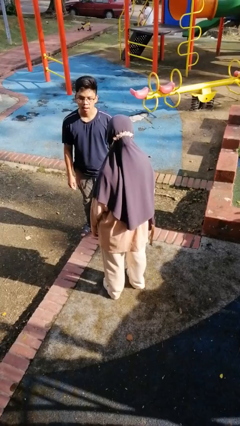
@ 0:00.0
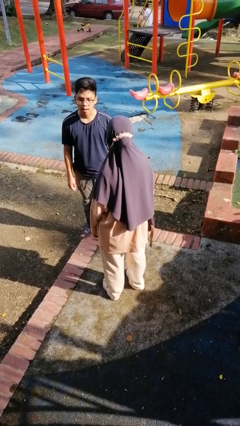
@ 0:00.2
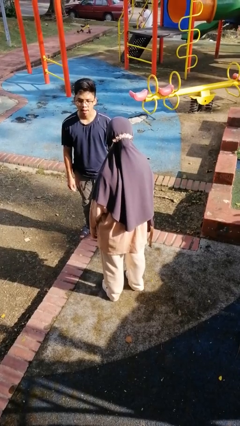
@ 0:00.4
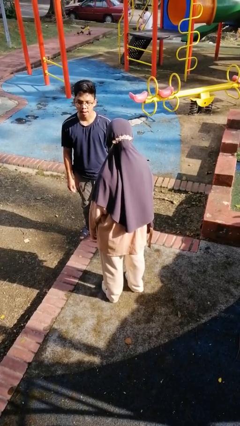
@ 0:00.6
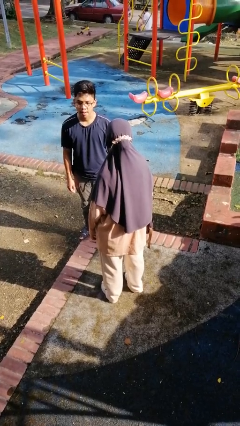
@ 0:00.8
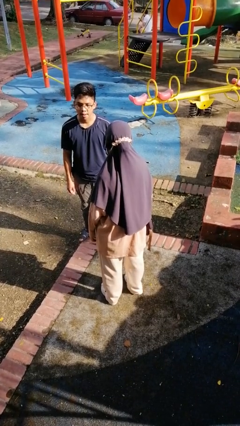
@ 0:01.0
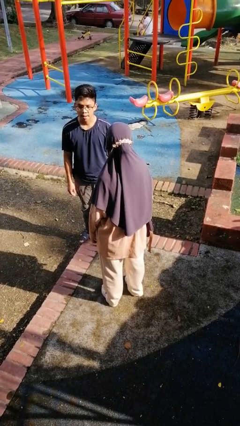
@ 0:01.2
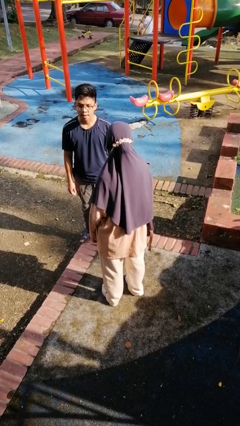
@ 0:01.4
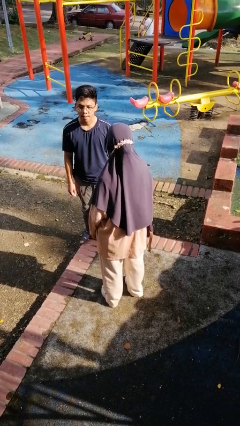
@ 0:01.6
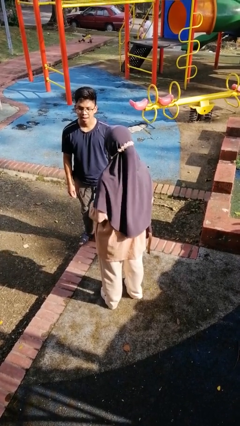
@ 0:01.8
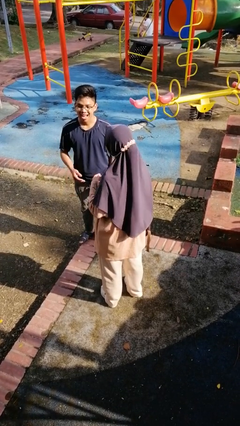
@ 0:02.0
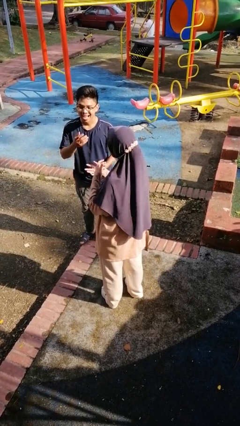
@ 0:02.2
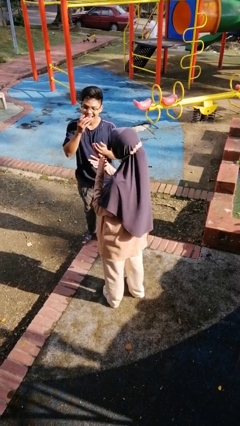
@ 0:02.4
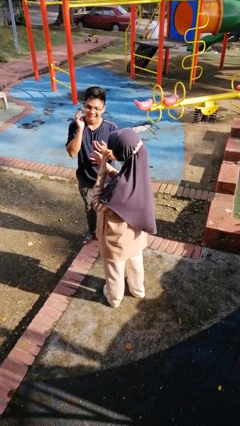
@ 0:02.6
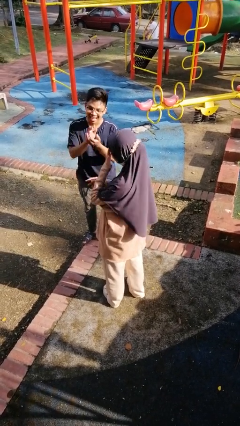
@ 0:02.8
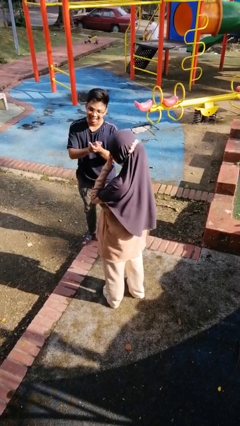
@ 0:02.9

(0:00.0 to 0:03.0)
person laughs with person

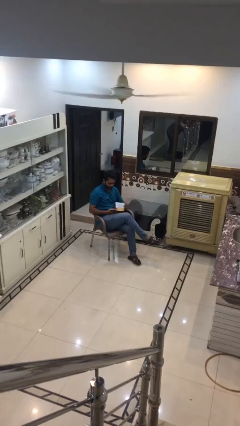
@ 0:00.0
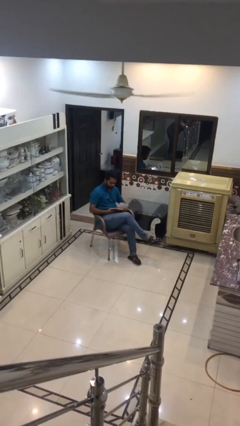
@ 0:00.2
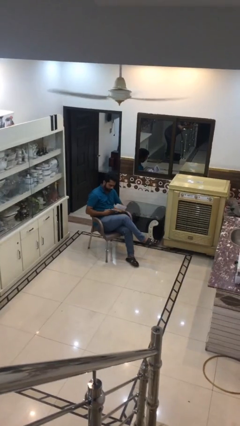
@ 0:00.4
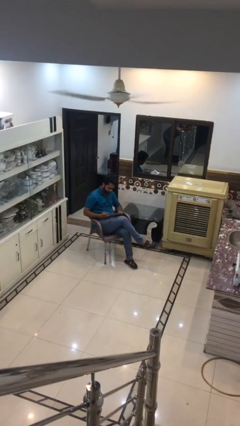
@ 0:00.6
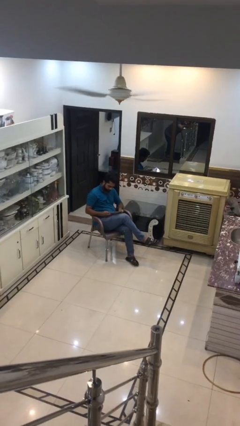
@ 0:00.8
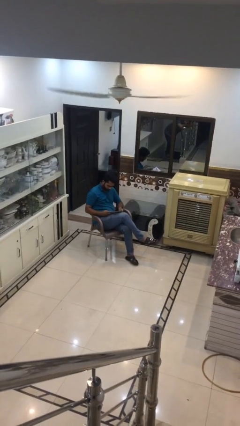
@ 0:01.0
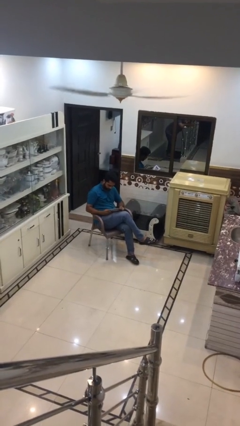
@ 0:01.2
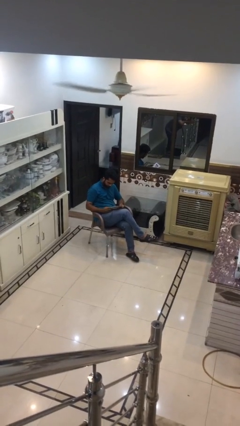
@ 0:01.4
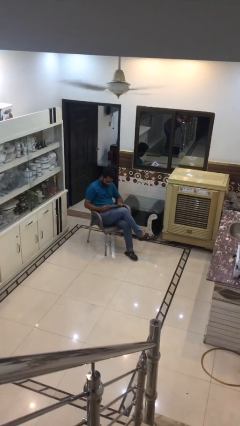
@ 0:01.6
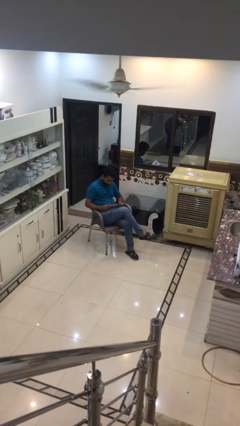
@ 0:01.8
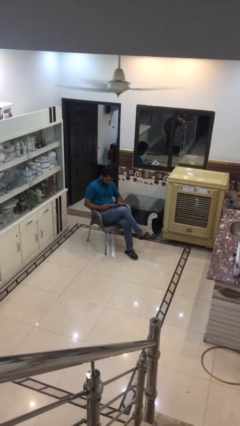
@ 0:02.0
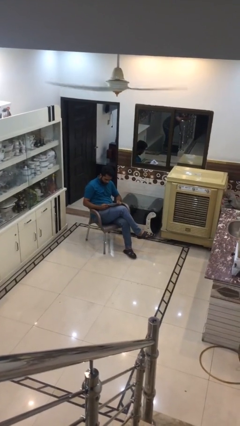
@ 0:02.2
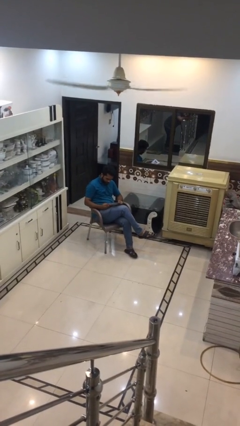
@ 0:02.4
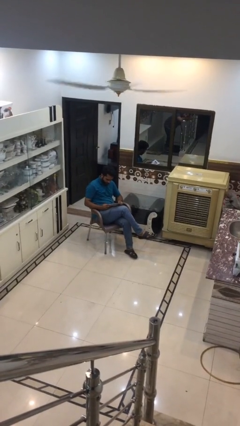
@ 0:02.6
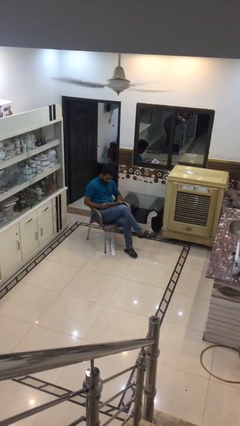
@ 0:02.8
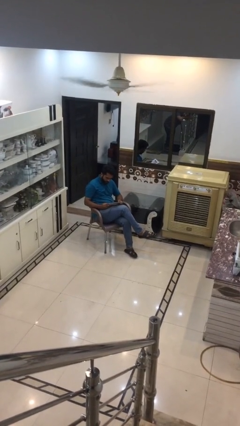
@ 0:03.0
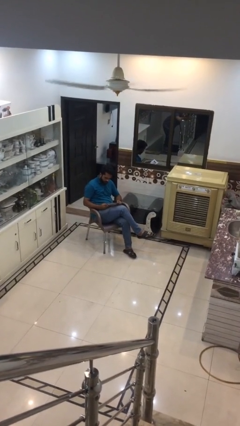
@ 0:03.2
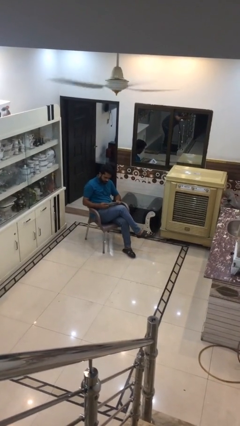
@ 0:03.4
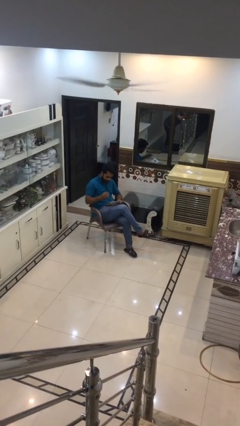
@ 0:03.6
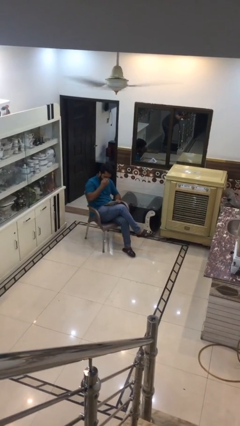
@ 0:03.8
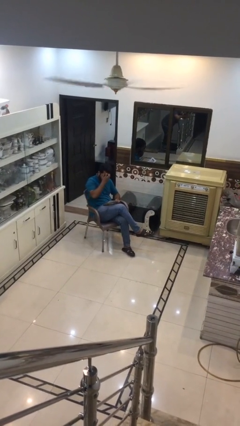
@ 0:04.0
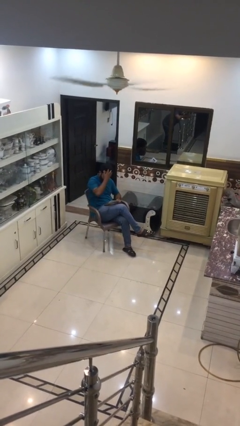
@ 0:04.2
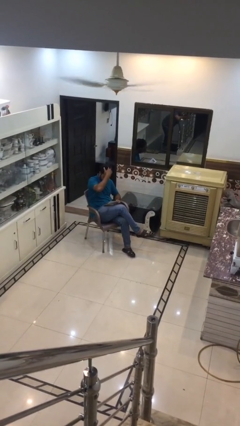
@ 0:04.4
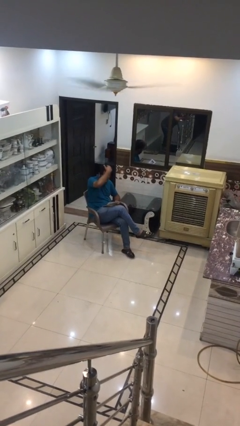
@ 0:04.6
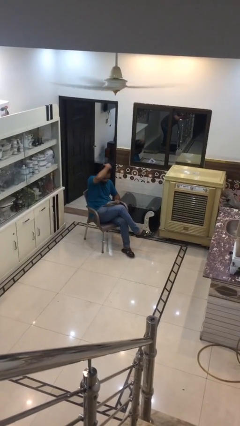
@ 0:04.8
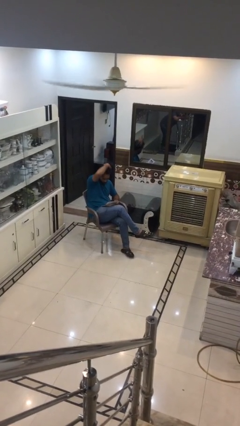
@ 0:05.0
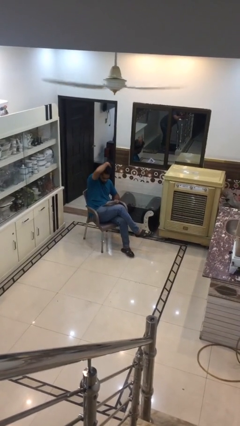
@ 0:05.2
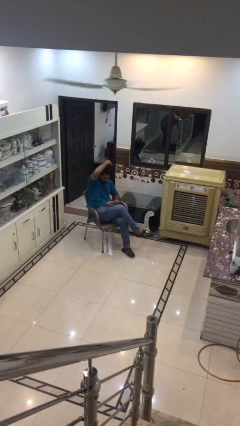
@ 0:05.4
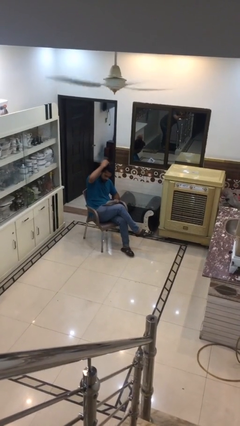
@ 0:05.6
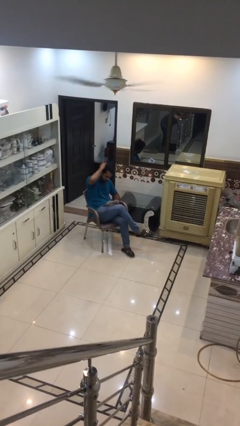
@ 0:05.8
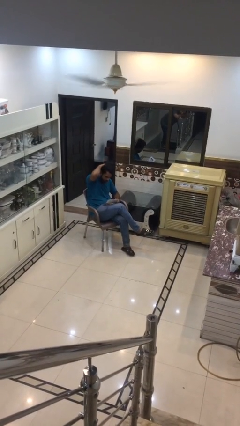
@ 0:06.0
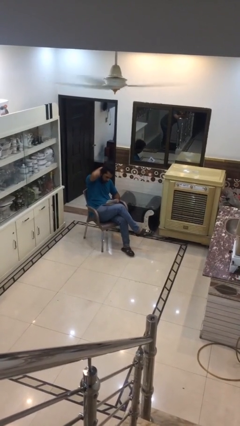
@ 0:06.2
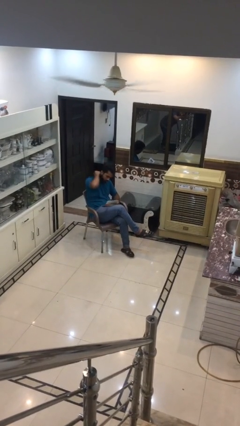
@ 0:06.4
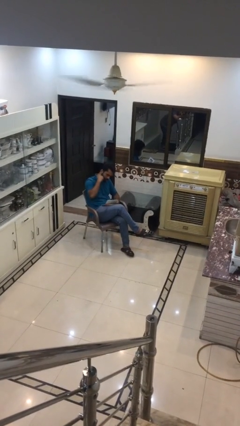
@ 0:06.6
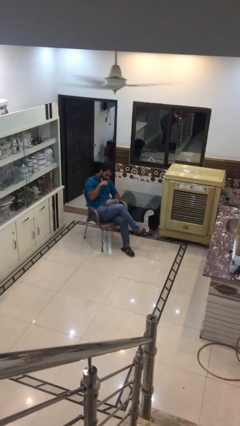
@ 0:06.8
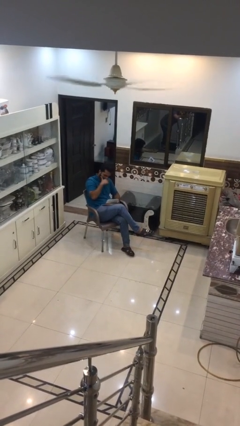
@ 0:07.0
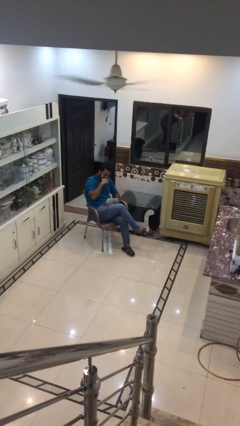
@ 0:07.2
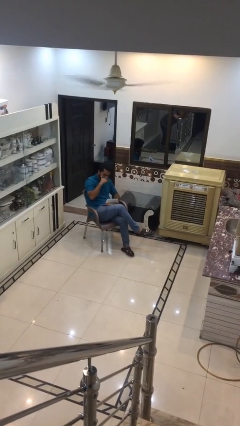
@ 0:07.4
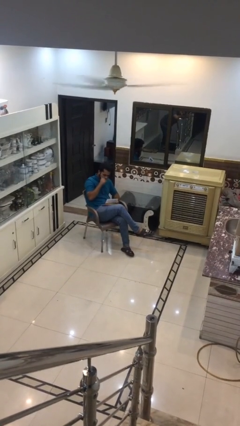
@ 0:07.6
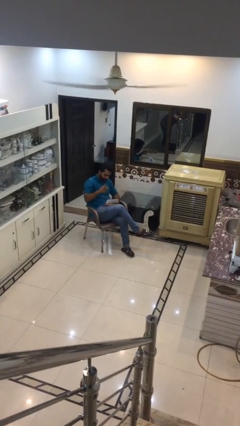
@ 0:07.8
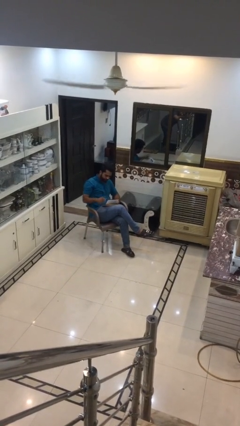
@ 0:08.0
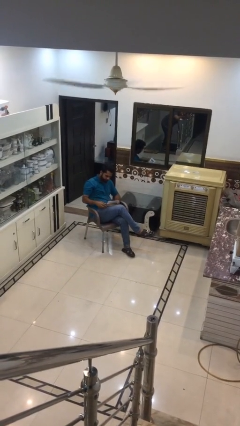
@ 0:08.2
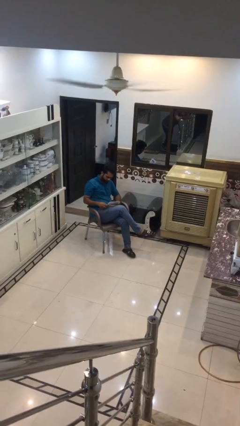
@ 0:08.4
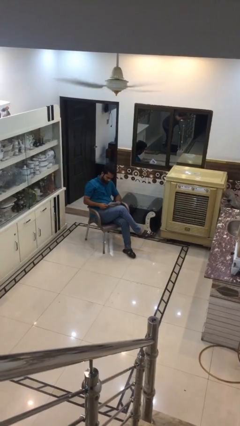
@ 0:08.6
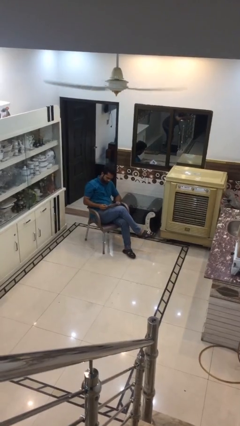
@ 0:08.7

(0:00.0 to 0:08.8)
person reads document

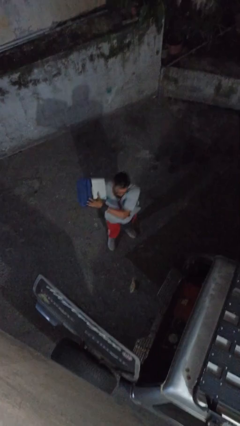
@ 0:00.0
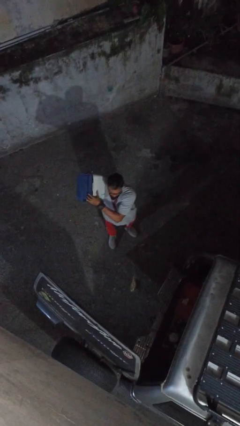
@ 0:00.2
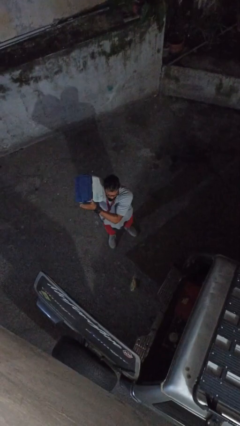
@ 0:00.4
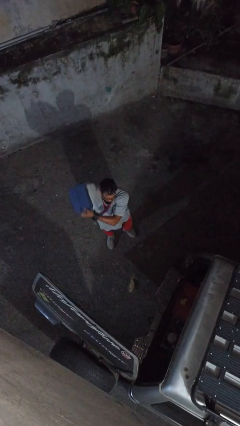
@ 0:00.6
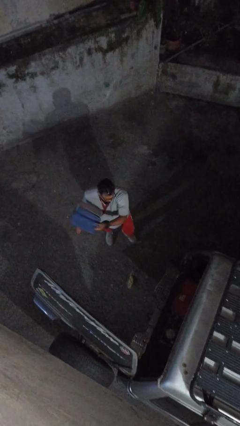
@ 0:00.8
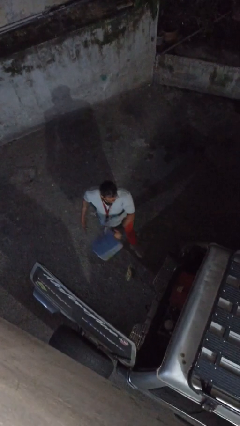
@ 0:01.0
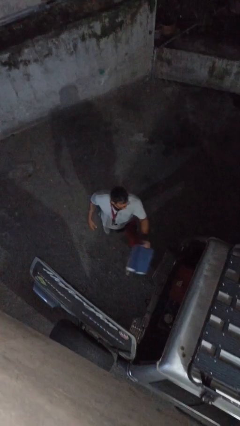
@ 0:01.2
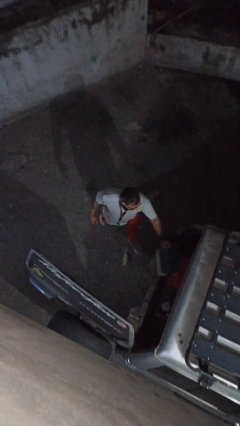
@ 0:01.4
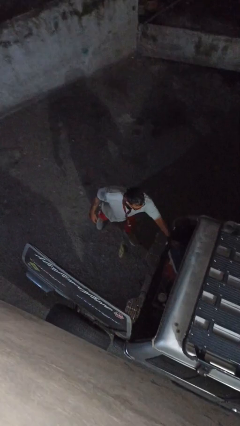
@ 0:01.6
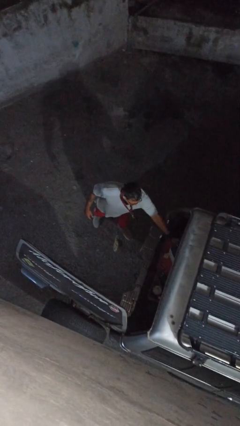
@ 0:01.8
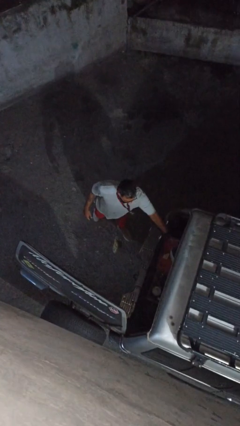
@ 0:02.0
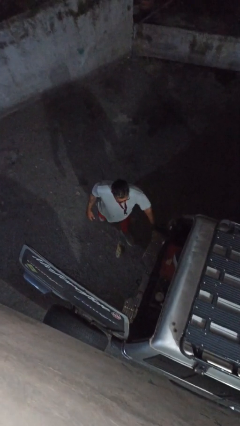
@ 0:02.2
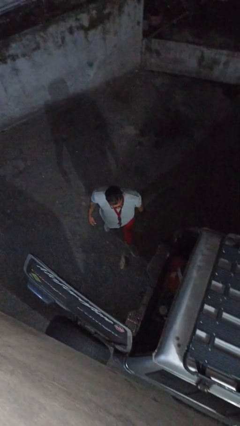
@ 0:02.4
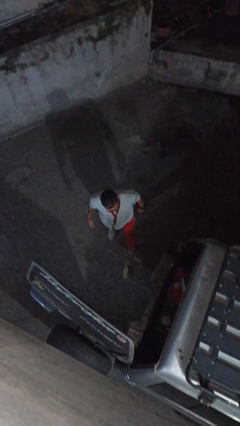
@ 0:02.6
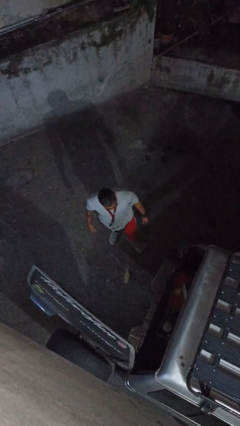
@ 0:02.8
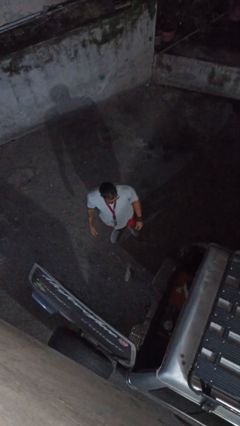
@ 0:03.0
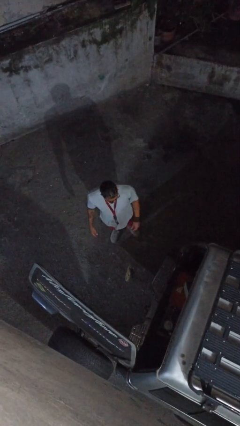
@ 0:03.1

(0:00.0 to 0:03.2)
person loads car

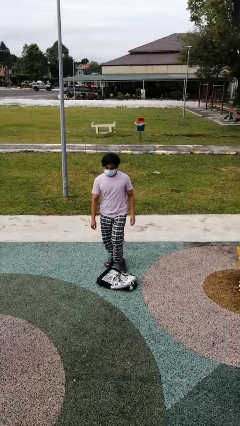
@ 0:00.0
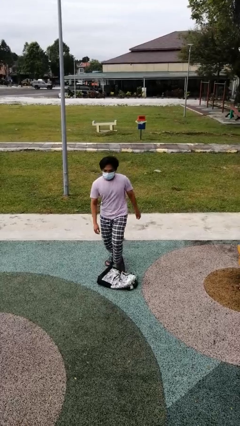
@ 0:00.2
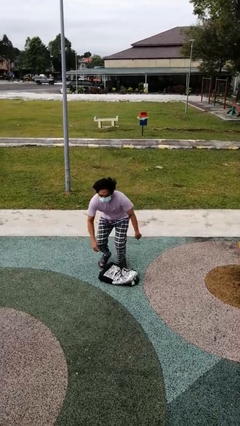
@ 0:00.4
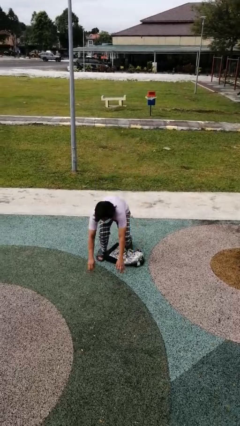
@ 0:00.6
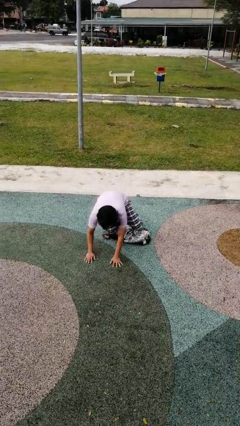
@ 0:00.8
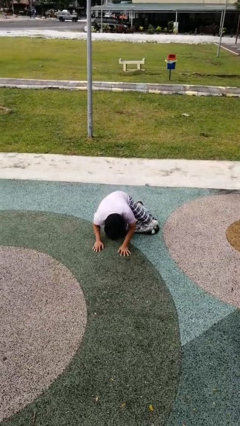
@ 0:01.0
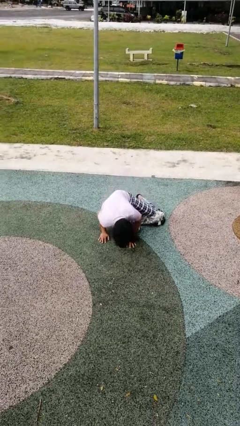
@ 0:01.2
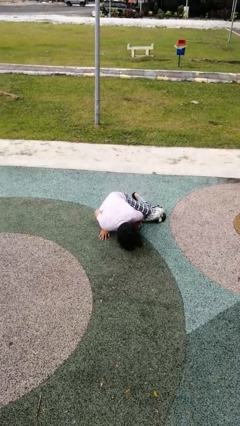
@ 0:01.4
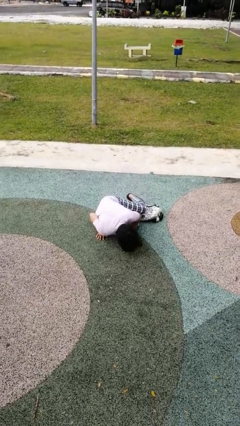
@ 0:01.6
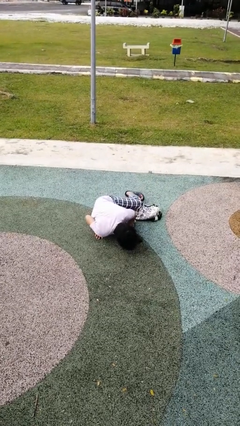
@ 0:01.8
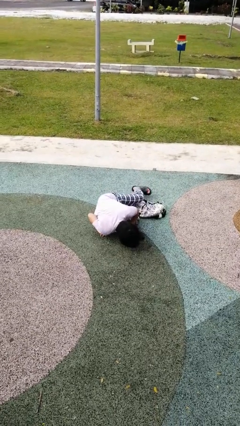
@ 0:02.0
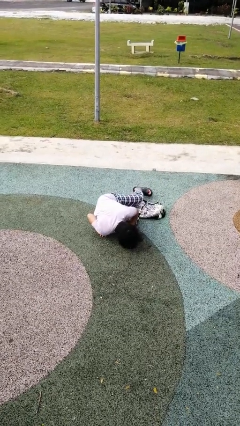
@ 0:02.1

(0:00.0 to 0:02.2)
person trips on object on floor

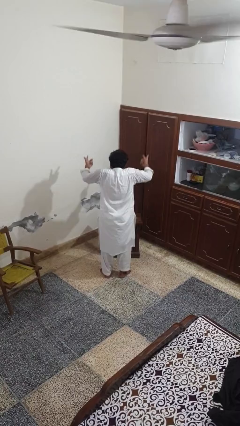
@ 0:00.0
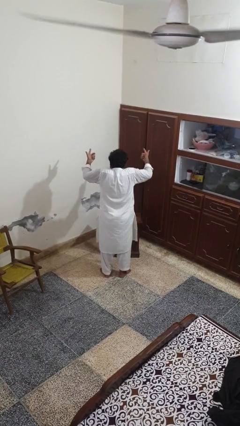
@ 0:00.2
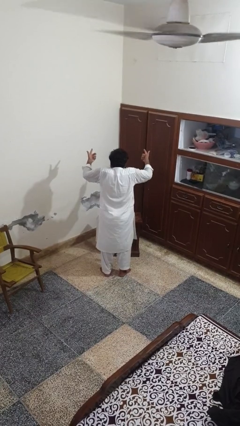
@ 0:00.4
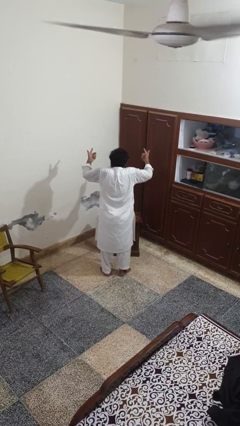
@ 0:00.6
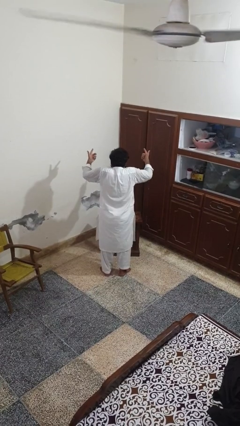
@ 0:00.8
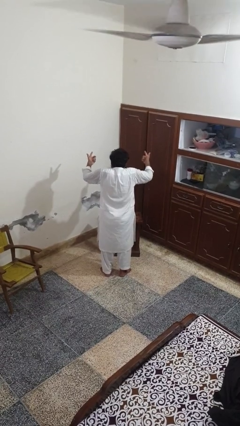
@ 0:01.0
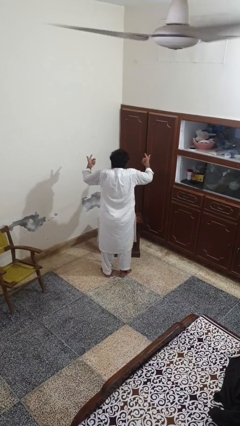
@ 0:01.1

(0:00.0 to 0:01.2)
person shrugs
